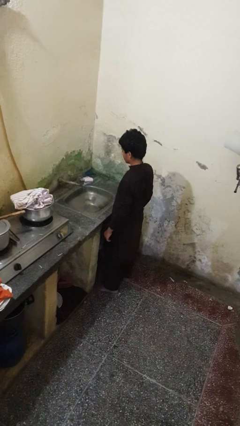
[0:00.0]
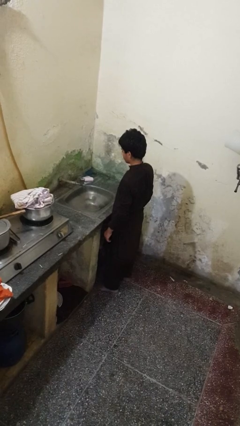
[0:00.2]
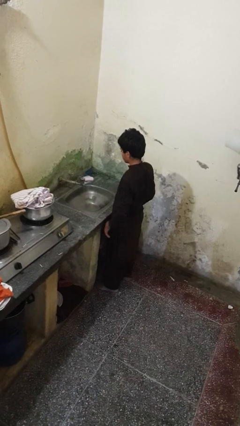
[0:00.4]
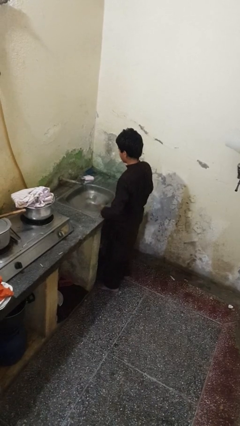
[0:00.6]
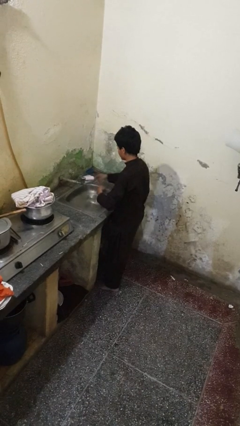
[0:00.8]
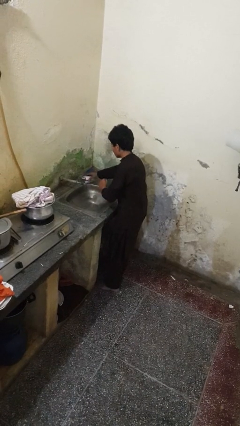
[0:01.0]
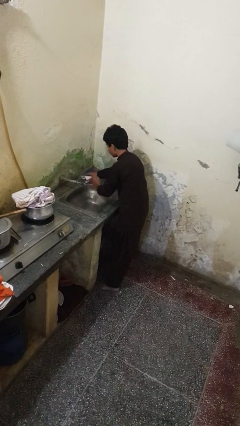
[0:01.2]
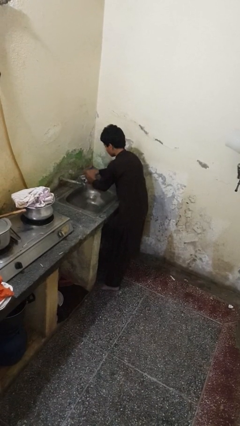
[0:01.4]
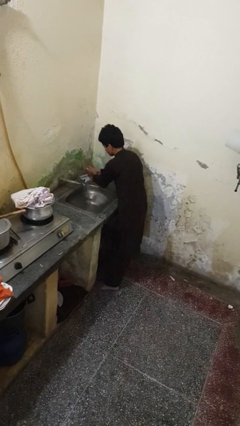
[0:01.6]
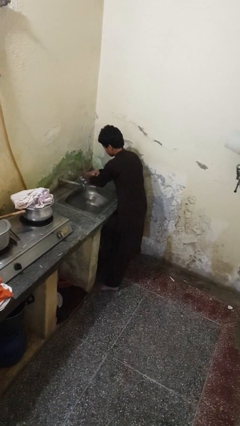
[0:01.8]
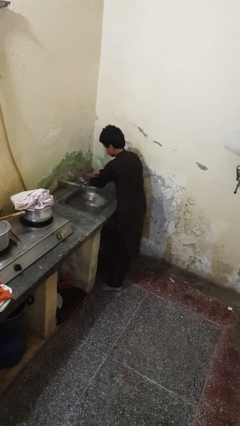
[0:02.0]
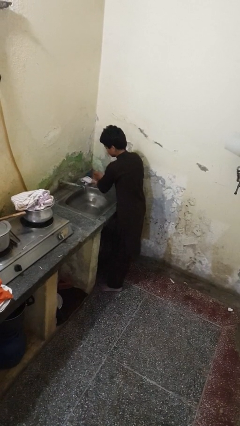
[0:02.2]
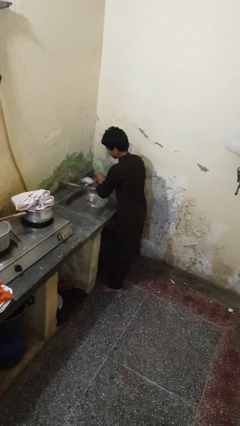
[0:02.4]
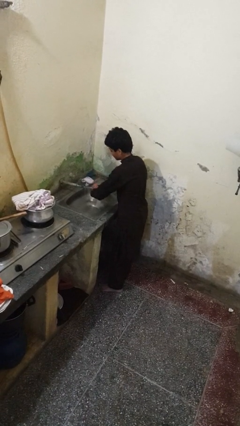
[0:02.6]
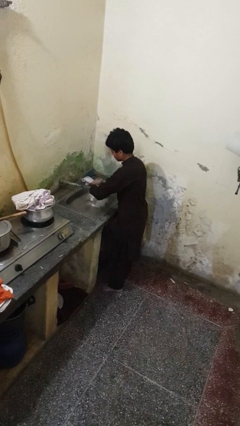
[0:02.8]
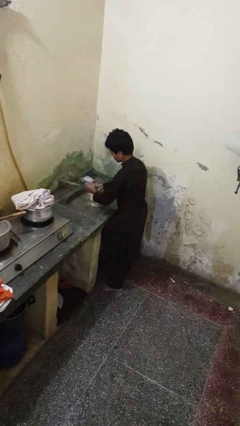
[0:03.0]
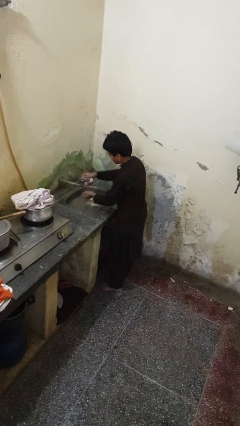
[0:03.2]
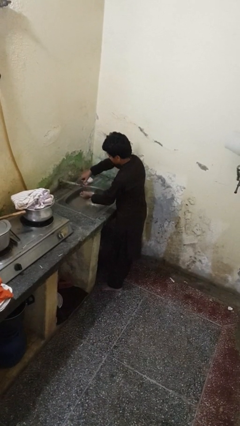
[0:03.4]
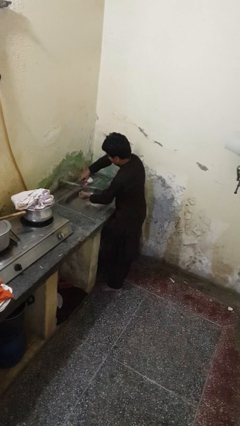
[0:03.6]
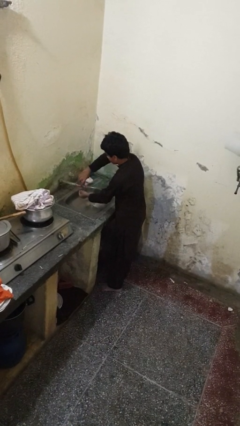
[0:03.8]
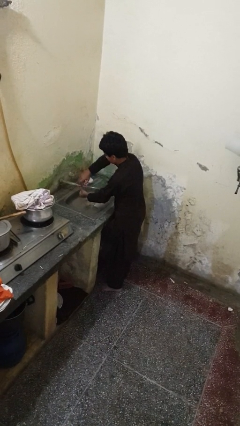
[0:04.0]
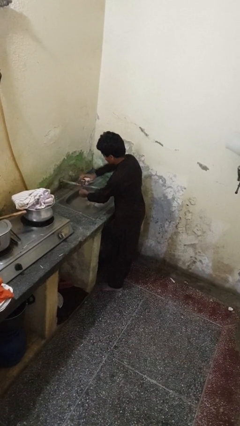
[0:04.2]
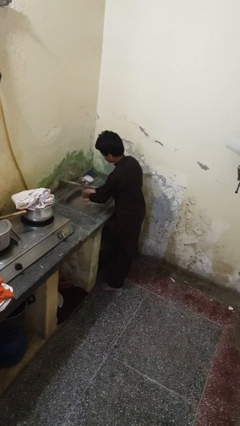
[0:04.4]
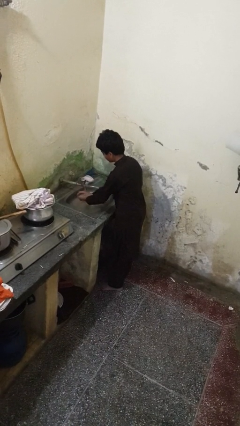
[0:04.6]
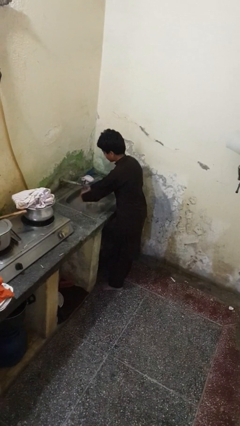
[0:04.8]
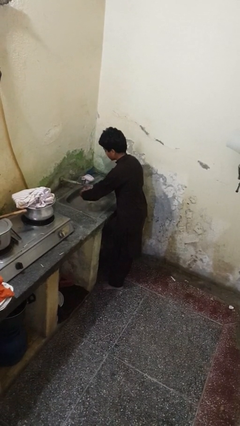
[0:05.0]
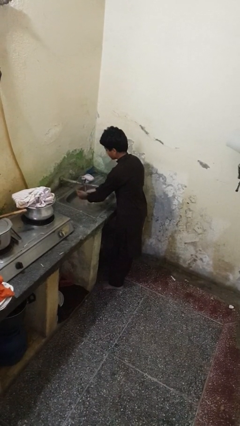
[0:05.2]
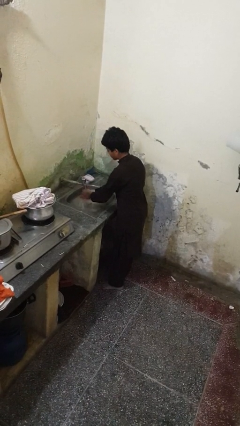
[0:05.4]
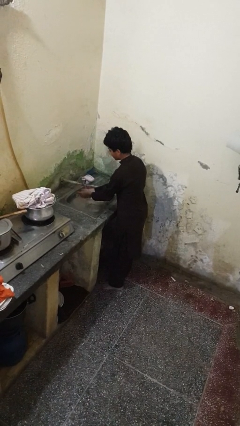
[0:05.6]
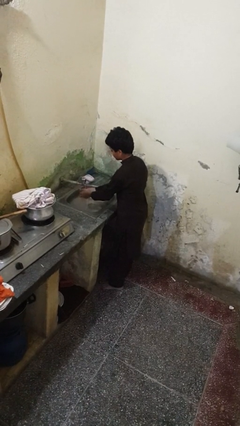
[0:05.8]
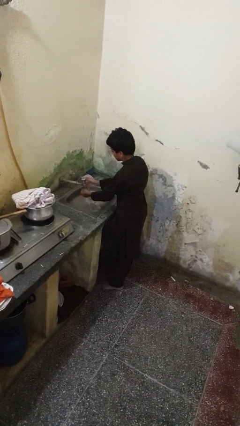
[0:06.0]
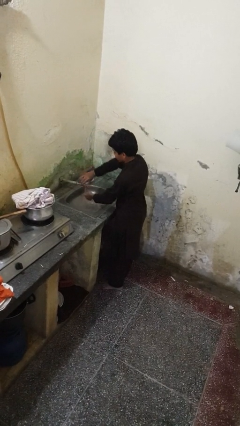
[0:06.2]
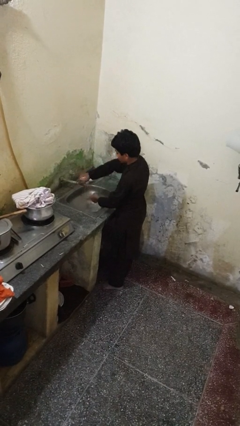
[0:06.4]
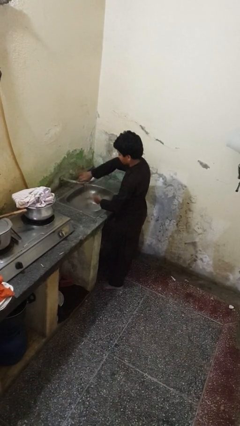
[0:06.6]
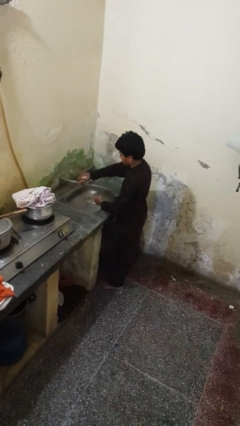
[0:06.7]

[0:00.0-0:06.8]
person washes hands

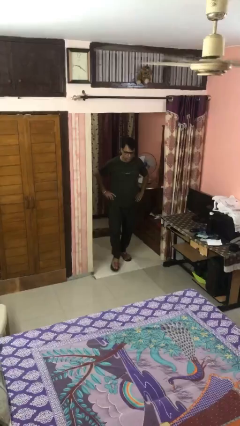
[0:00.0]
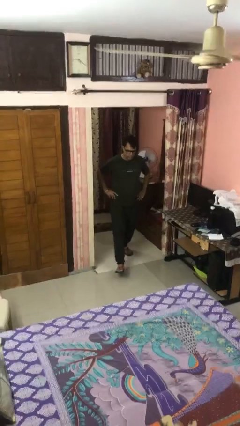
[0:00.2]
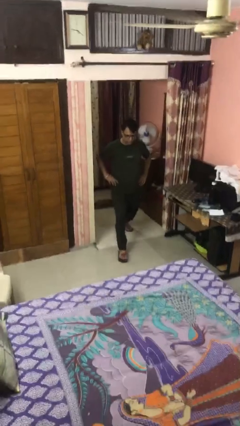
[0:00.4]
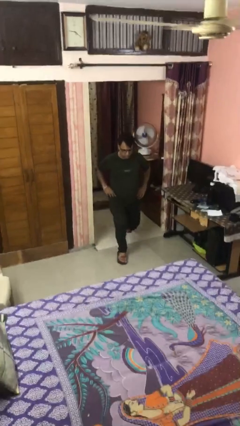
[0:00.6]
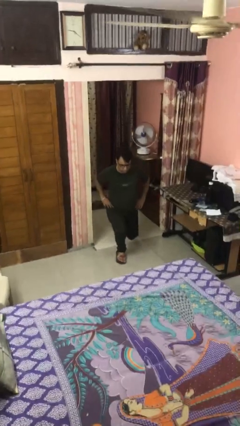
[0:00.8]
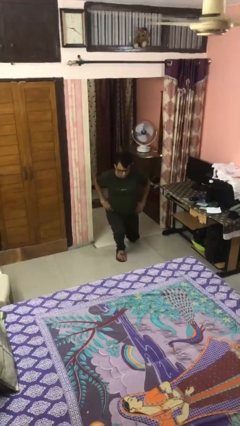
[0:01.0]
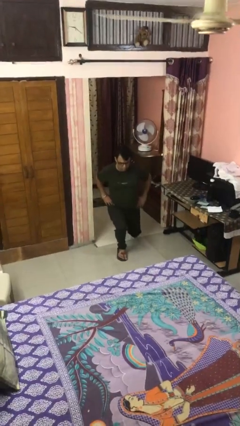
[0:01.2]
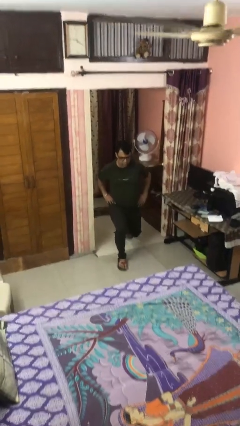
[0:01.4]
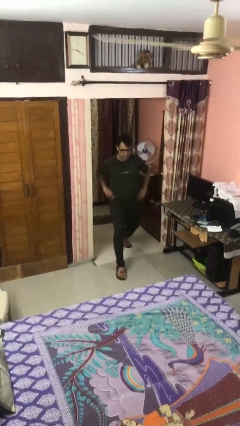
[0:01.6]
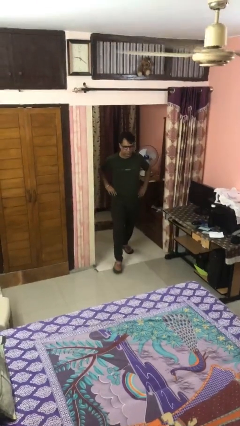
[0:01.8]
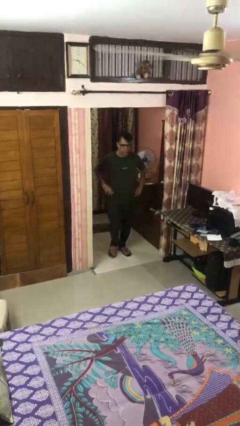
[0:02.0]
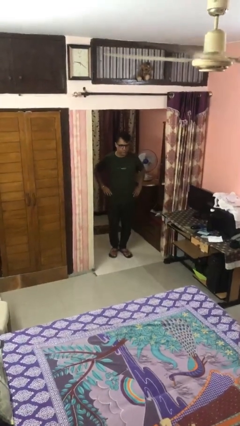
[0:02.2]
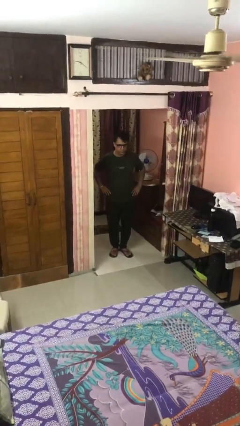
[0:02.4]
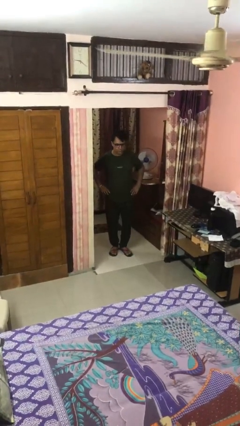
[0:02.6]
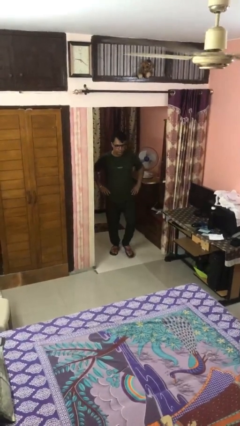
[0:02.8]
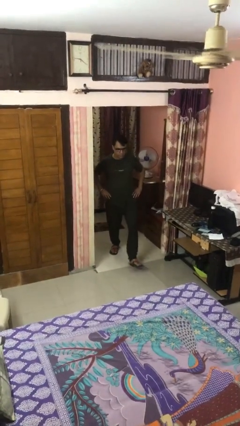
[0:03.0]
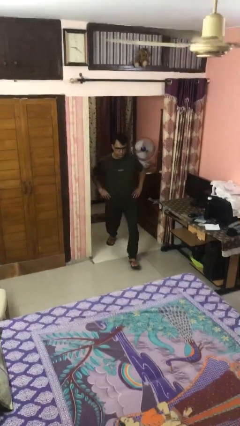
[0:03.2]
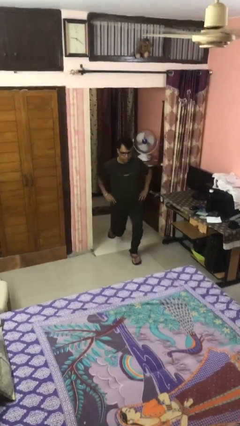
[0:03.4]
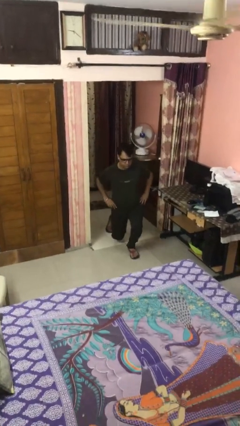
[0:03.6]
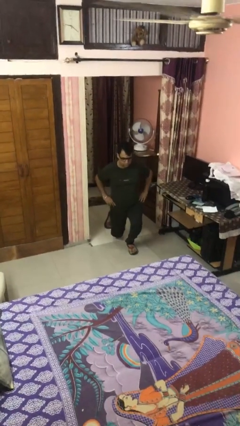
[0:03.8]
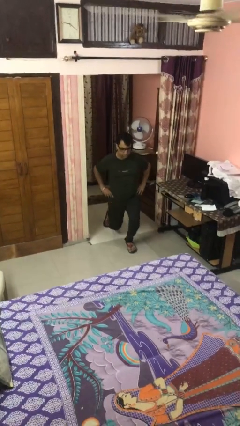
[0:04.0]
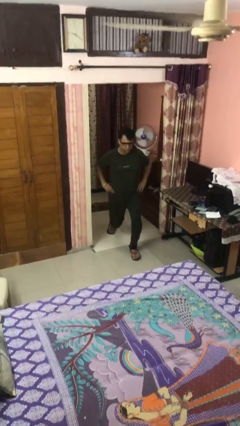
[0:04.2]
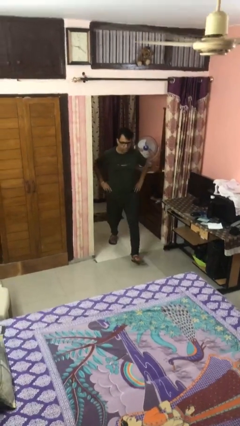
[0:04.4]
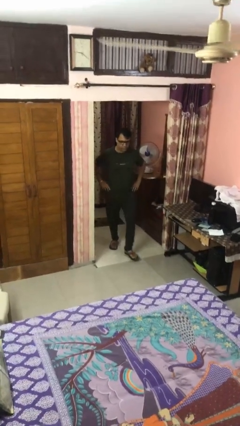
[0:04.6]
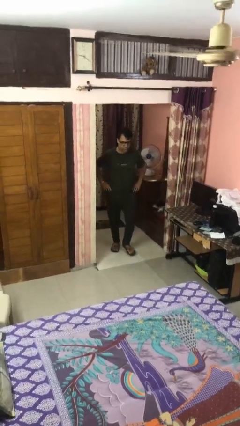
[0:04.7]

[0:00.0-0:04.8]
person exercises with lunges

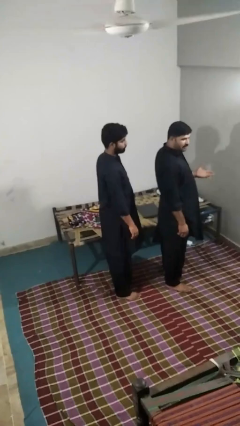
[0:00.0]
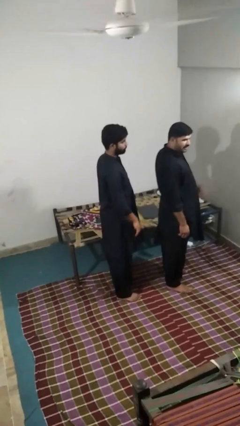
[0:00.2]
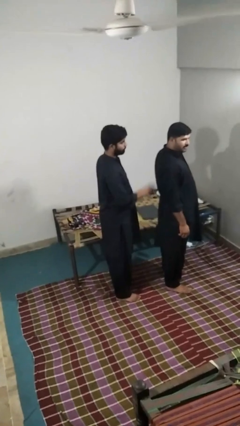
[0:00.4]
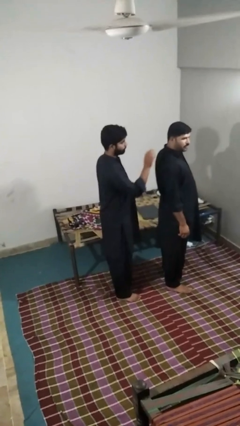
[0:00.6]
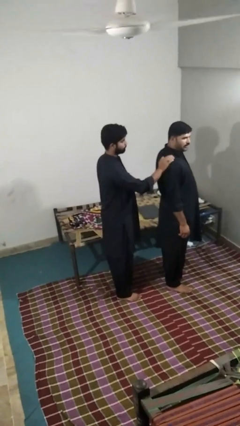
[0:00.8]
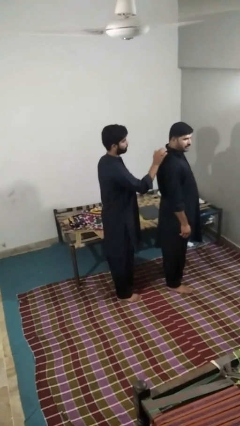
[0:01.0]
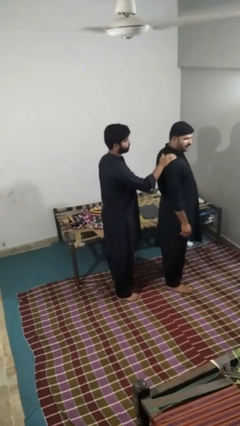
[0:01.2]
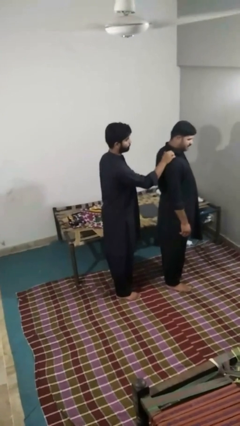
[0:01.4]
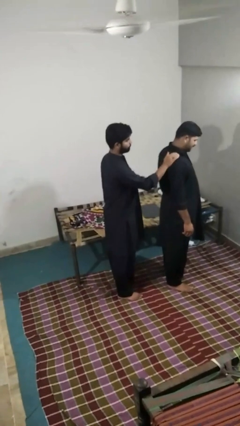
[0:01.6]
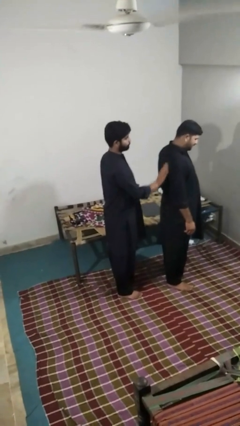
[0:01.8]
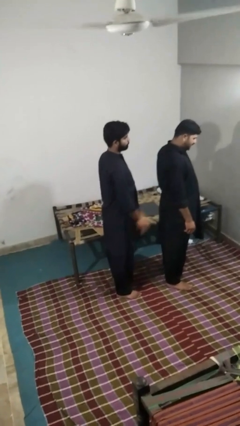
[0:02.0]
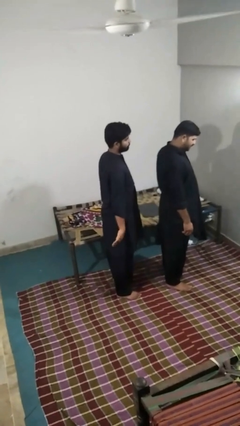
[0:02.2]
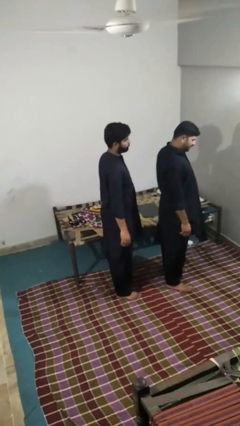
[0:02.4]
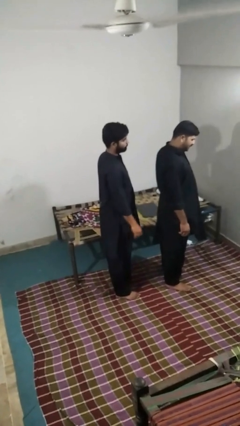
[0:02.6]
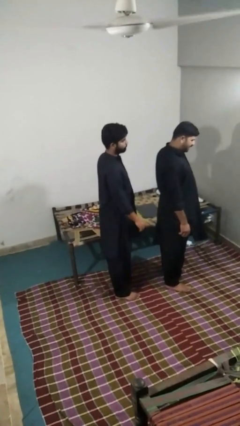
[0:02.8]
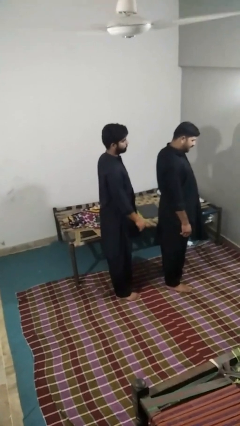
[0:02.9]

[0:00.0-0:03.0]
person touches back of person

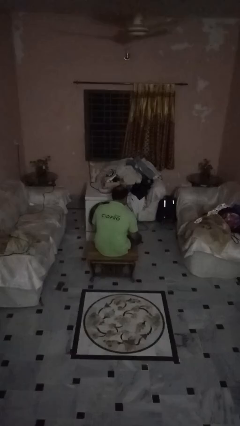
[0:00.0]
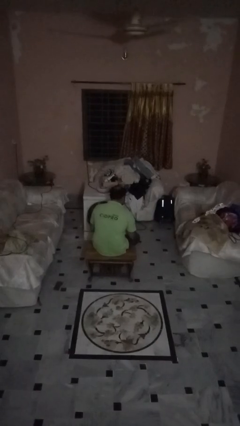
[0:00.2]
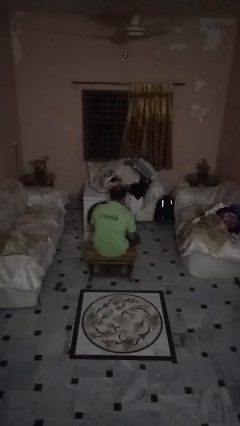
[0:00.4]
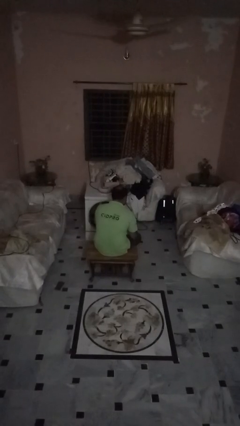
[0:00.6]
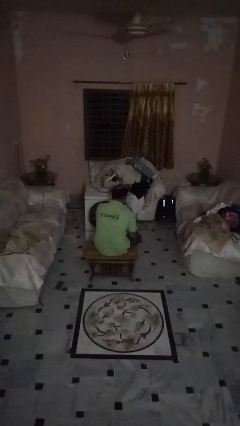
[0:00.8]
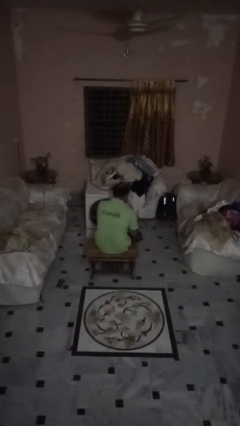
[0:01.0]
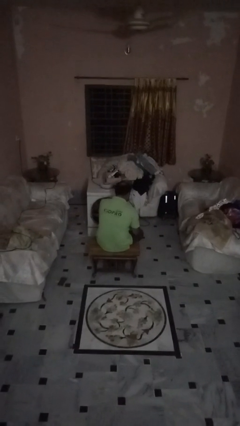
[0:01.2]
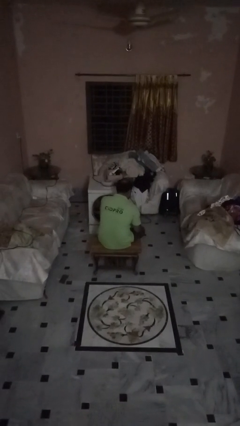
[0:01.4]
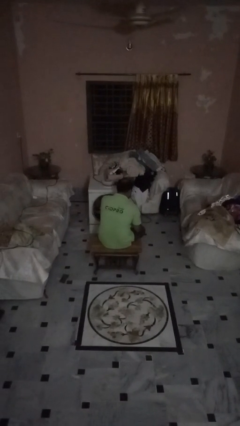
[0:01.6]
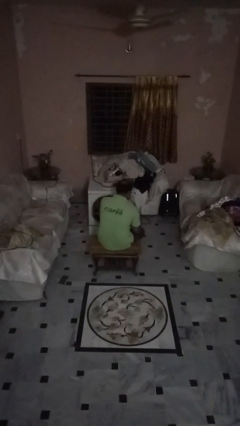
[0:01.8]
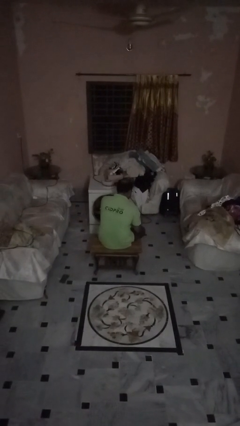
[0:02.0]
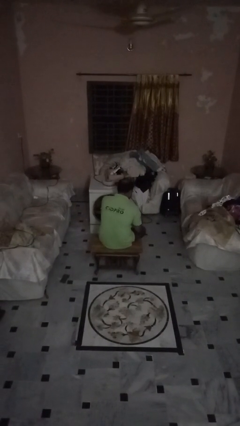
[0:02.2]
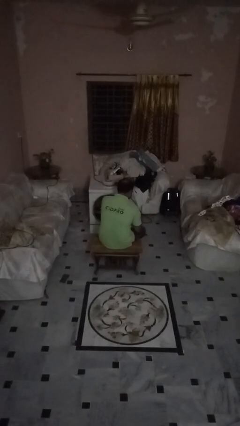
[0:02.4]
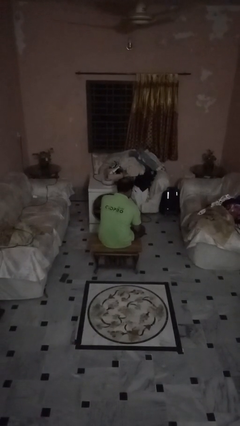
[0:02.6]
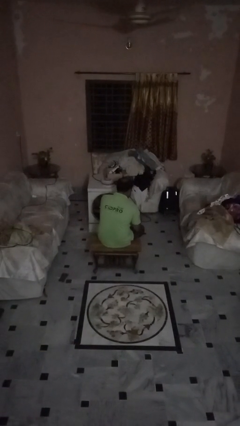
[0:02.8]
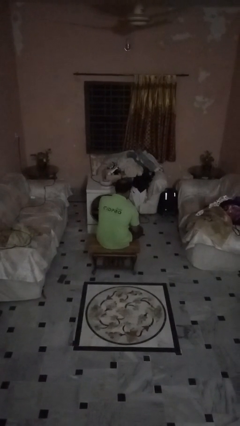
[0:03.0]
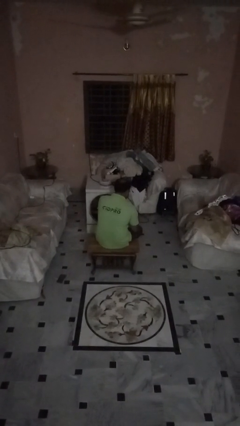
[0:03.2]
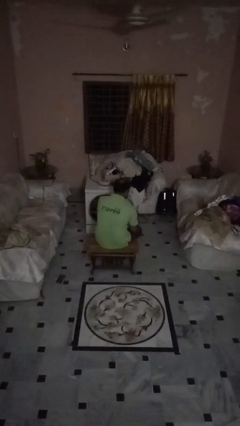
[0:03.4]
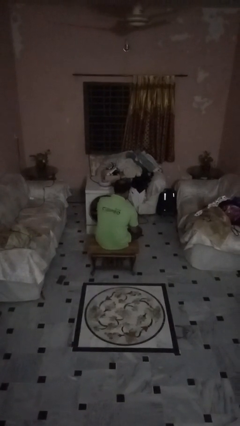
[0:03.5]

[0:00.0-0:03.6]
person opens beverage can
